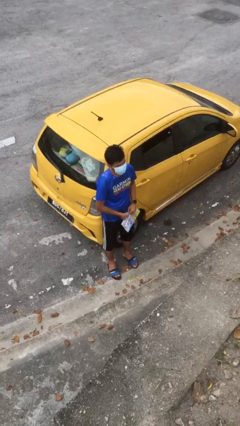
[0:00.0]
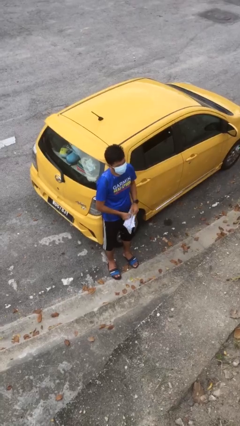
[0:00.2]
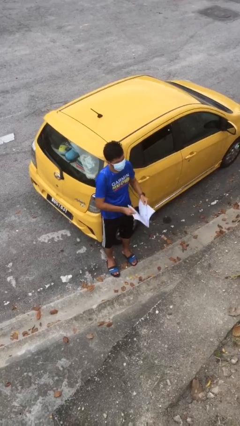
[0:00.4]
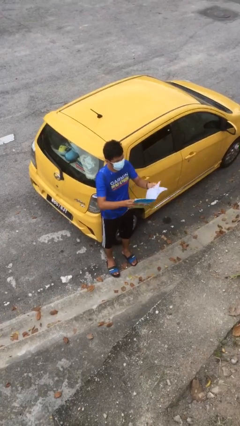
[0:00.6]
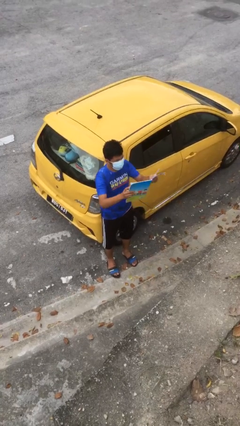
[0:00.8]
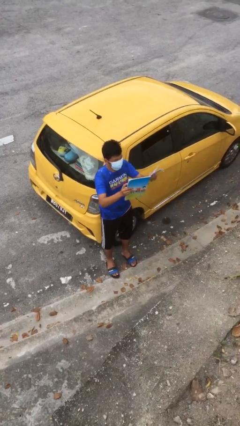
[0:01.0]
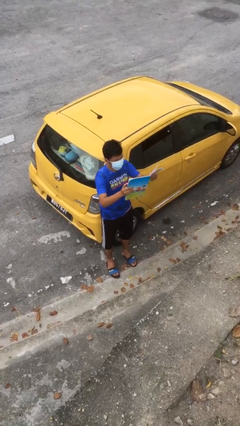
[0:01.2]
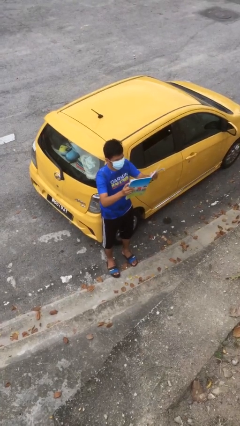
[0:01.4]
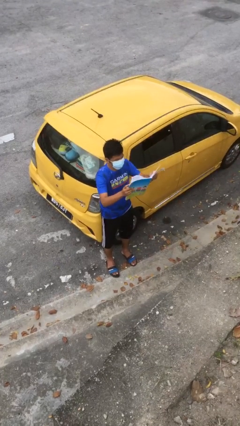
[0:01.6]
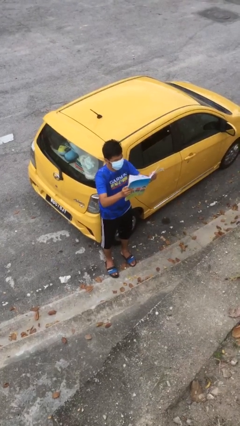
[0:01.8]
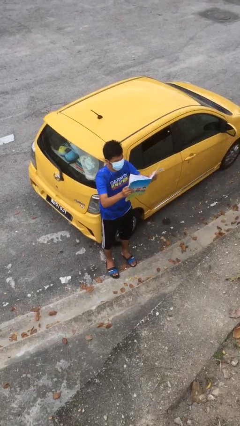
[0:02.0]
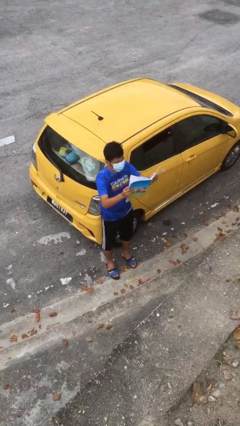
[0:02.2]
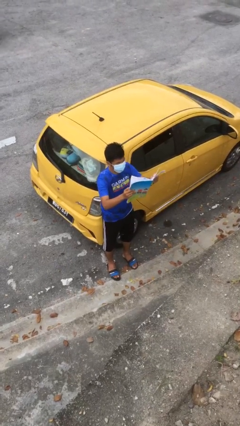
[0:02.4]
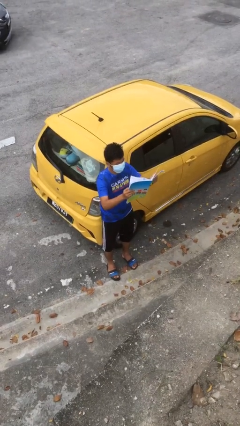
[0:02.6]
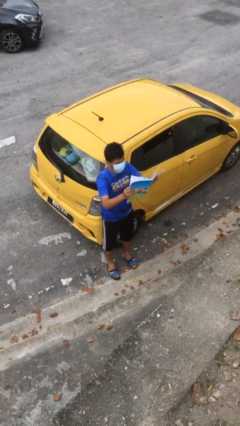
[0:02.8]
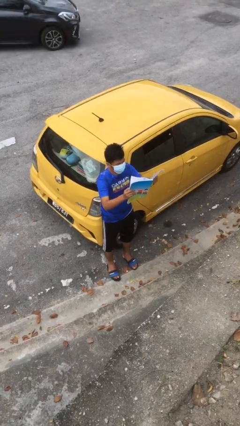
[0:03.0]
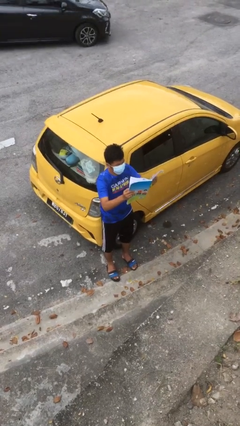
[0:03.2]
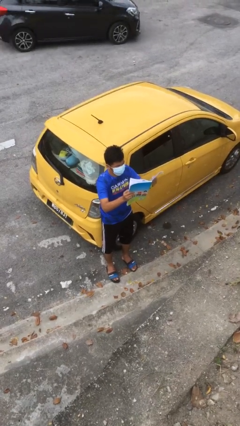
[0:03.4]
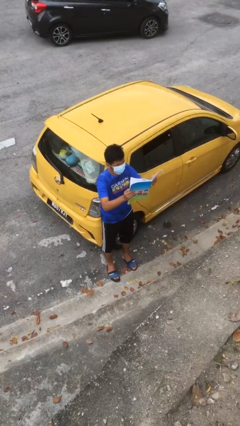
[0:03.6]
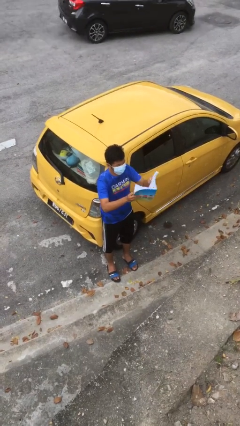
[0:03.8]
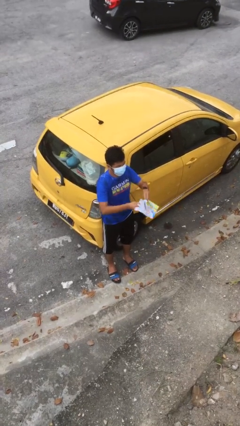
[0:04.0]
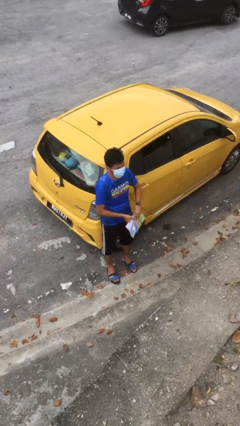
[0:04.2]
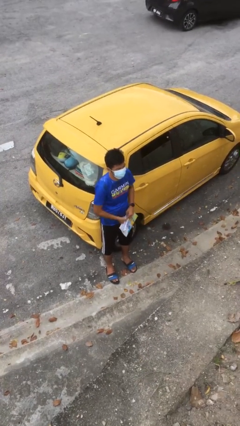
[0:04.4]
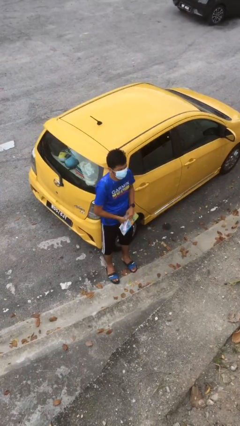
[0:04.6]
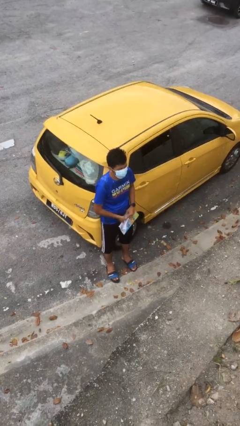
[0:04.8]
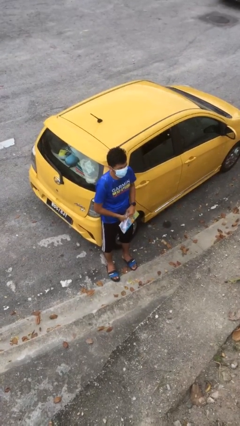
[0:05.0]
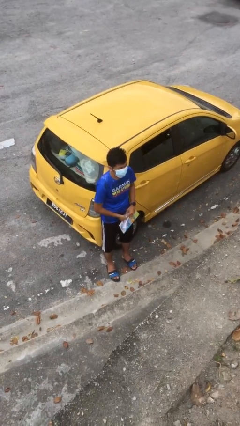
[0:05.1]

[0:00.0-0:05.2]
person reads document

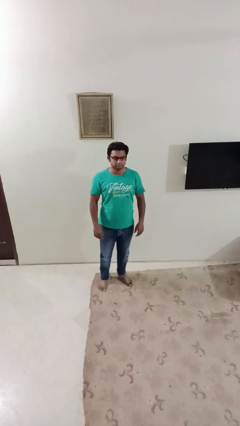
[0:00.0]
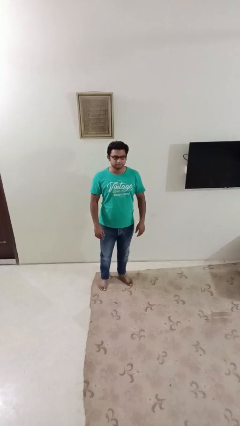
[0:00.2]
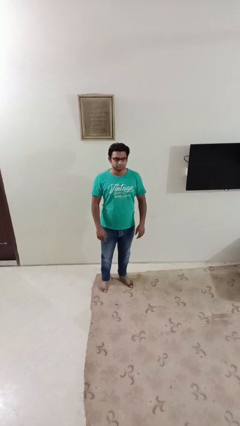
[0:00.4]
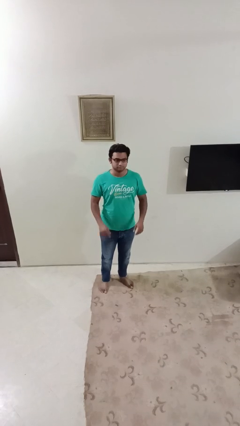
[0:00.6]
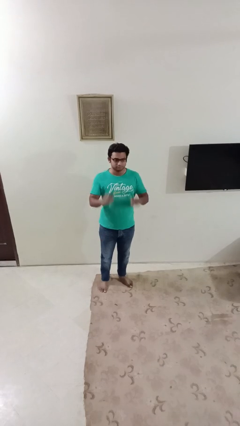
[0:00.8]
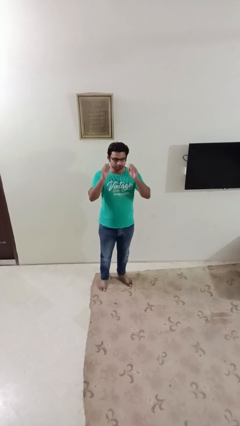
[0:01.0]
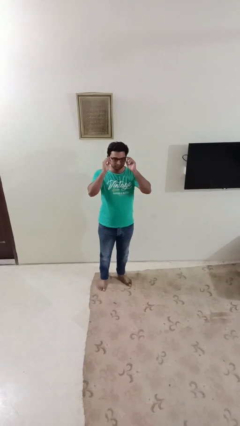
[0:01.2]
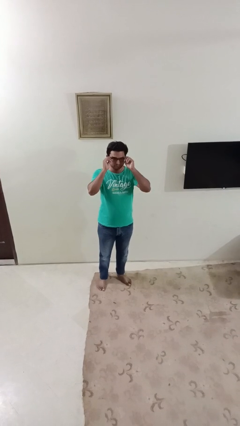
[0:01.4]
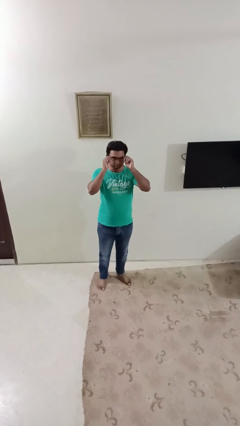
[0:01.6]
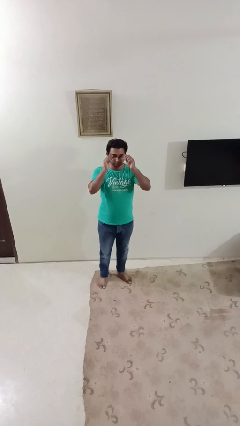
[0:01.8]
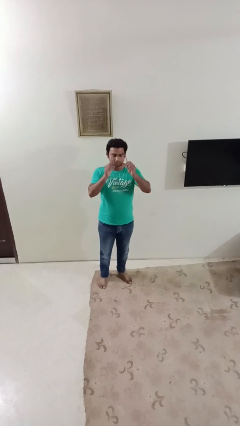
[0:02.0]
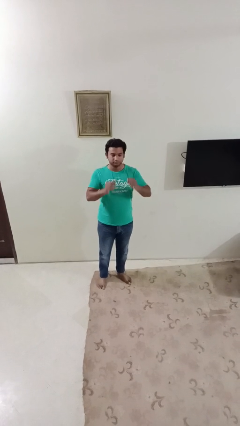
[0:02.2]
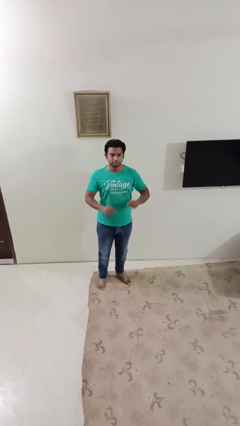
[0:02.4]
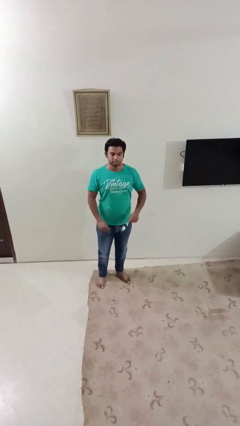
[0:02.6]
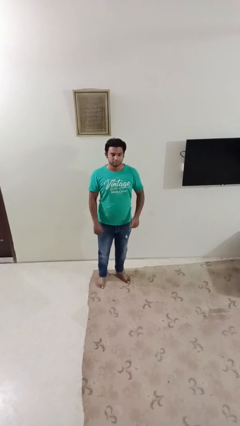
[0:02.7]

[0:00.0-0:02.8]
person takes off glasses

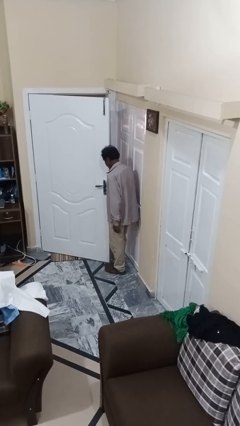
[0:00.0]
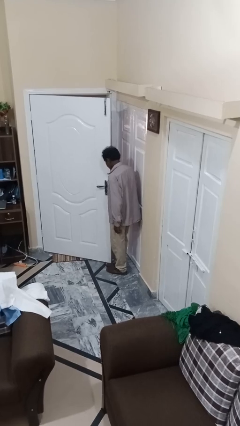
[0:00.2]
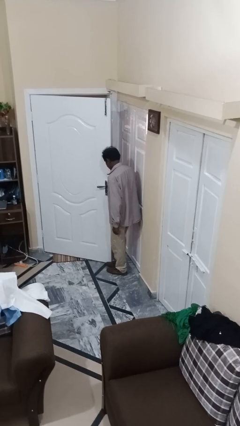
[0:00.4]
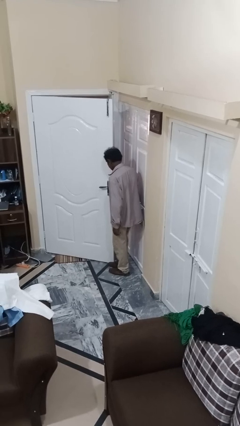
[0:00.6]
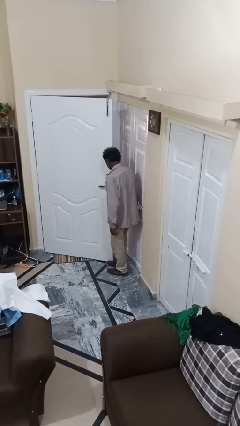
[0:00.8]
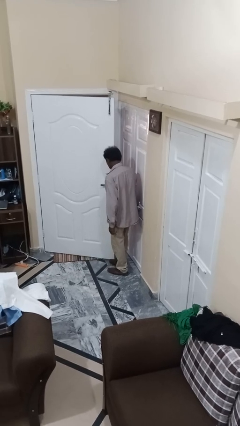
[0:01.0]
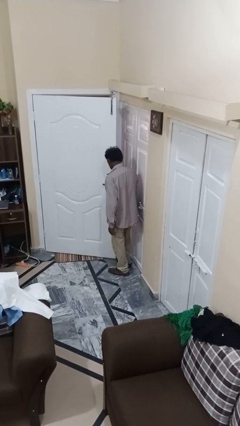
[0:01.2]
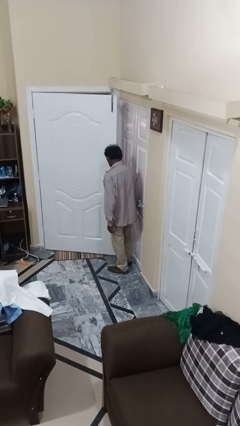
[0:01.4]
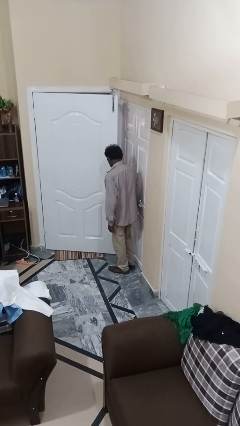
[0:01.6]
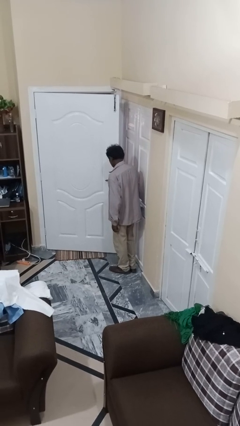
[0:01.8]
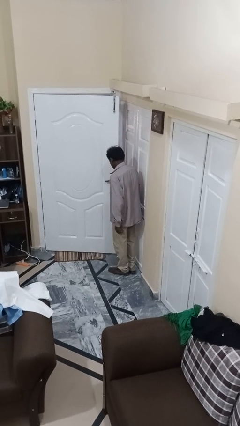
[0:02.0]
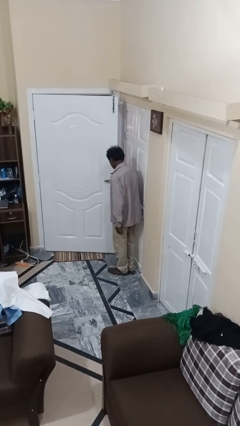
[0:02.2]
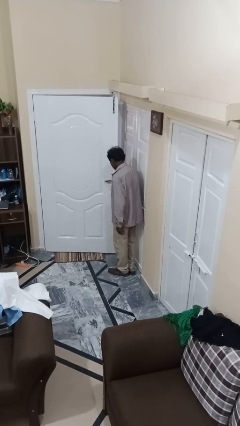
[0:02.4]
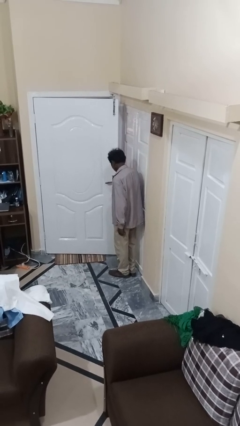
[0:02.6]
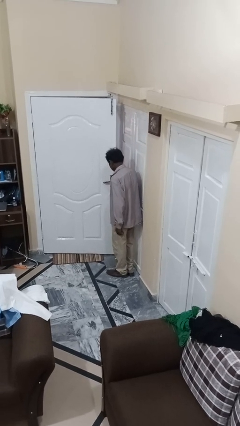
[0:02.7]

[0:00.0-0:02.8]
person closes door with foot

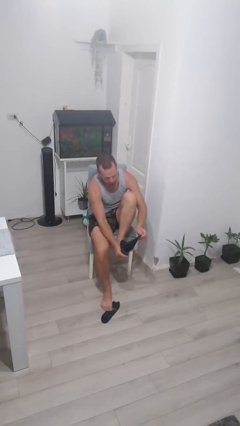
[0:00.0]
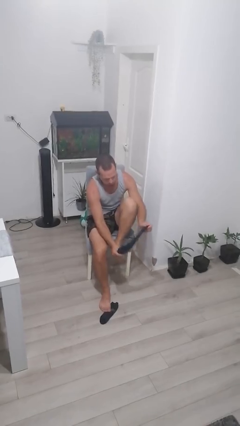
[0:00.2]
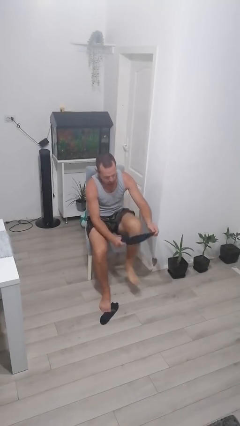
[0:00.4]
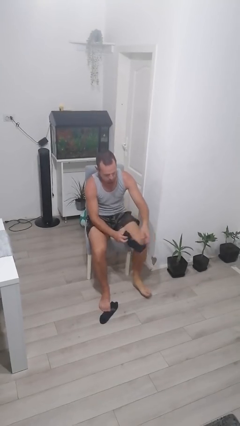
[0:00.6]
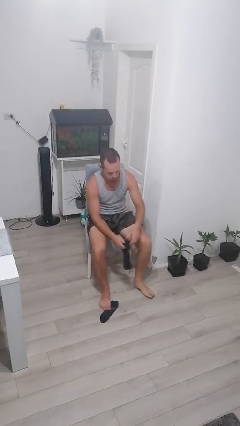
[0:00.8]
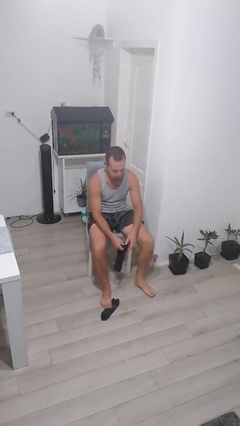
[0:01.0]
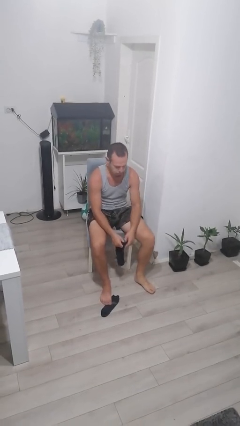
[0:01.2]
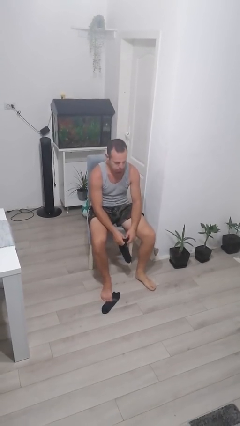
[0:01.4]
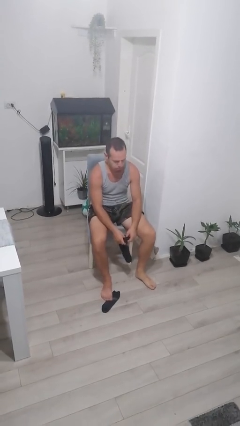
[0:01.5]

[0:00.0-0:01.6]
person takes off socks

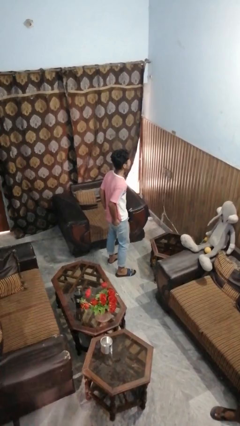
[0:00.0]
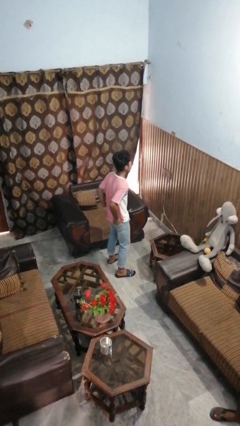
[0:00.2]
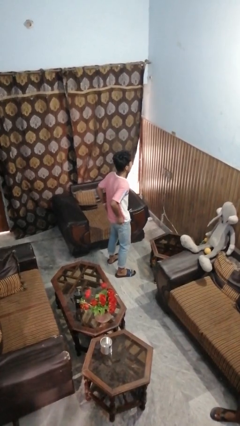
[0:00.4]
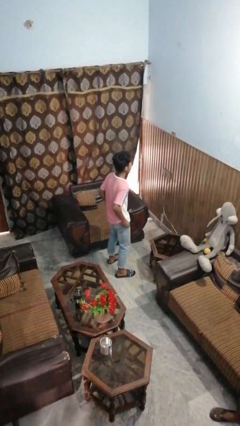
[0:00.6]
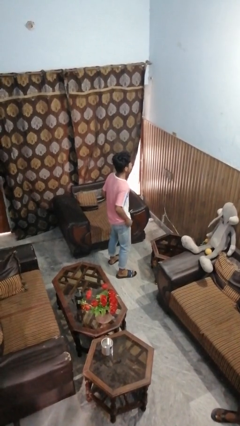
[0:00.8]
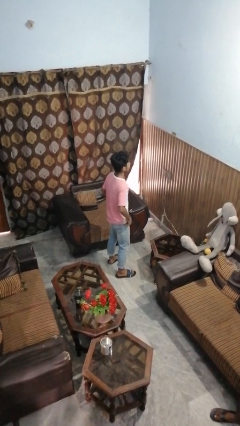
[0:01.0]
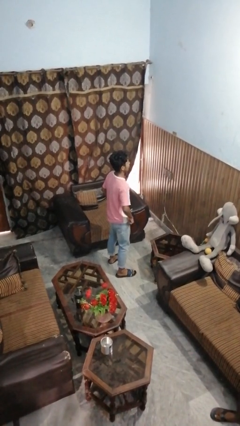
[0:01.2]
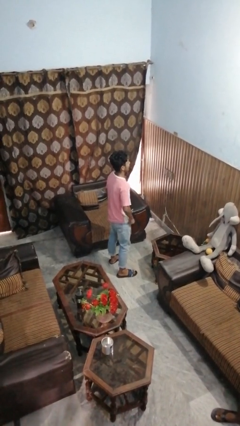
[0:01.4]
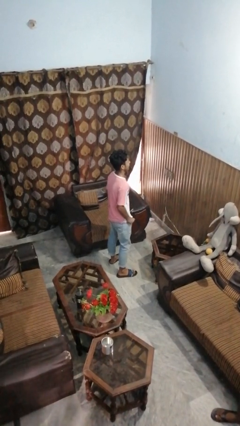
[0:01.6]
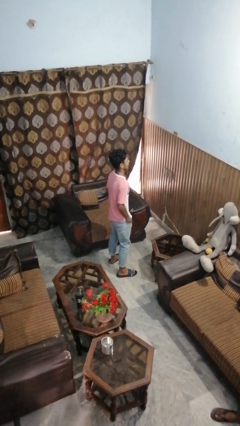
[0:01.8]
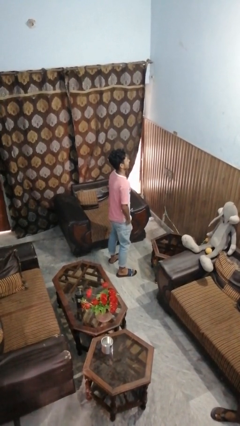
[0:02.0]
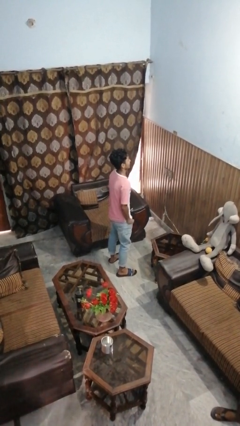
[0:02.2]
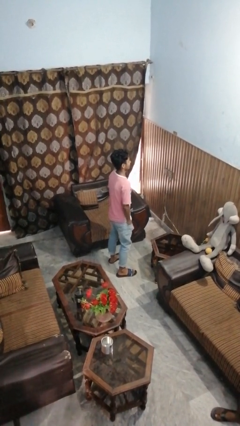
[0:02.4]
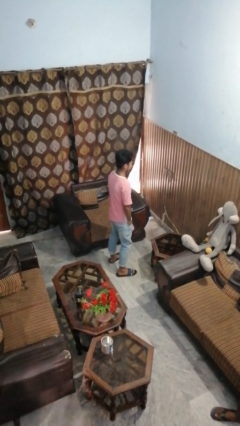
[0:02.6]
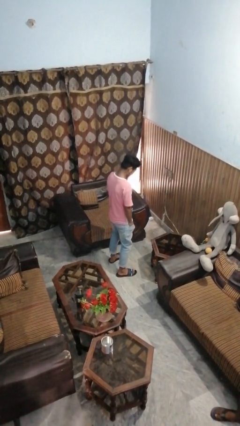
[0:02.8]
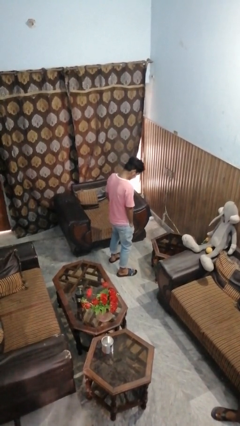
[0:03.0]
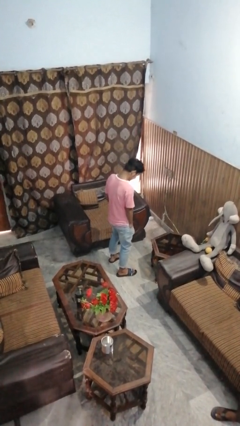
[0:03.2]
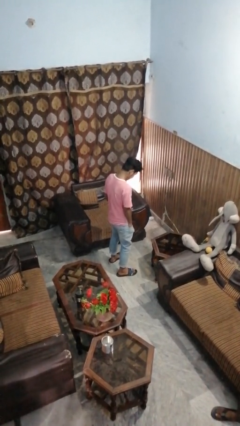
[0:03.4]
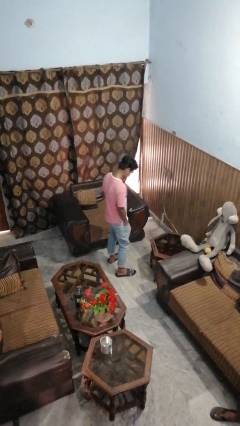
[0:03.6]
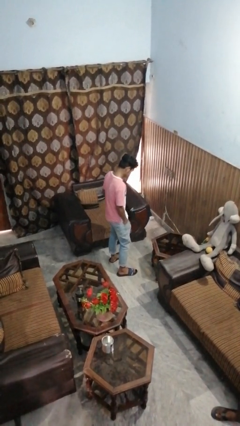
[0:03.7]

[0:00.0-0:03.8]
person puts hands in back pockets

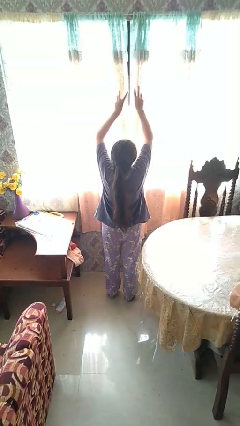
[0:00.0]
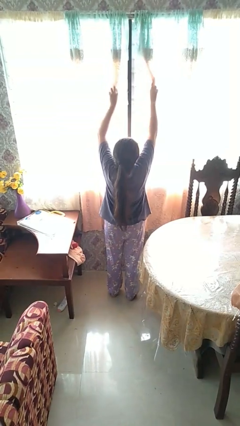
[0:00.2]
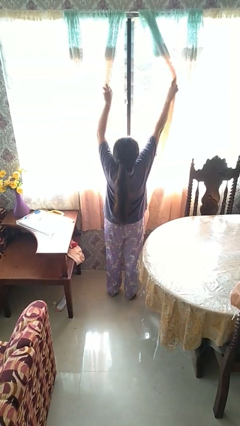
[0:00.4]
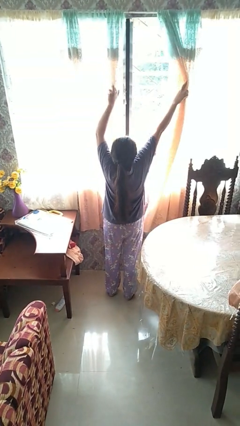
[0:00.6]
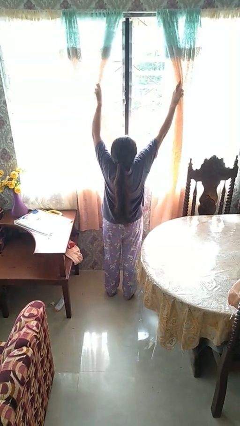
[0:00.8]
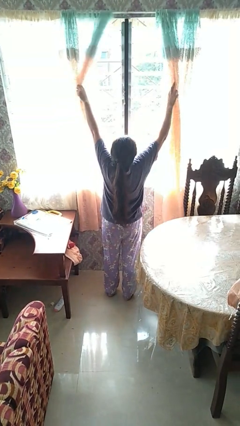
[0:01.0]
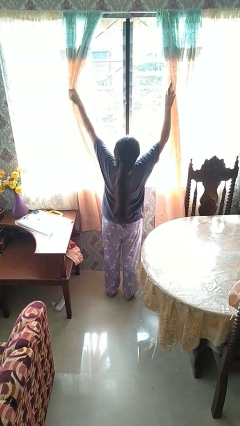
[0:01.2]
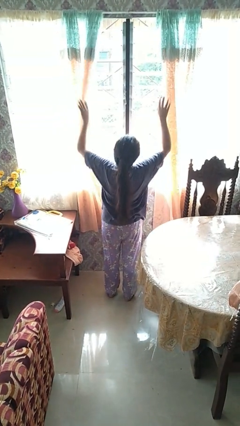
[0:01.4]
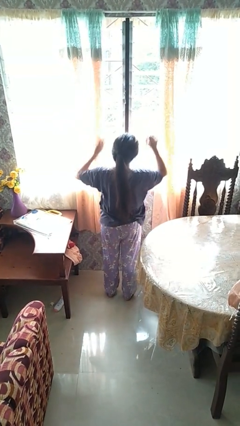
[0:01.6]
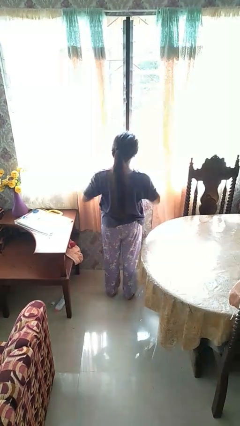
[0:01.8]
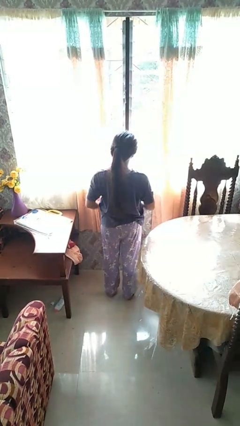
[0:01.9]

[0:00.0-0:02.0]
person opens curtains
